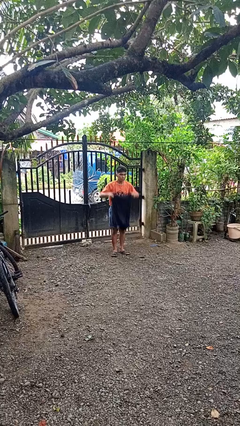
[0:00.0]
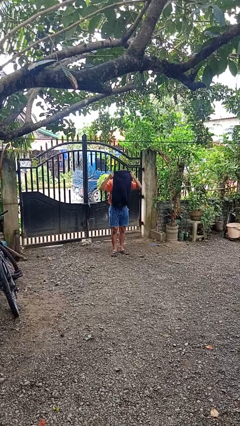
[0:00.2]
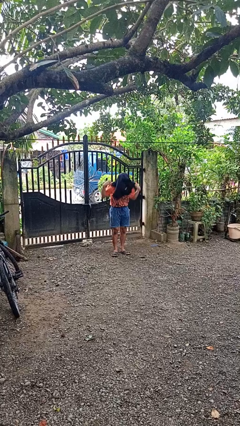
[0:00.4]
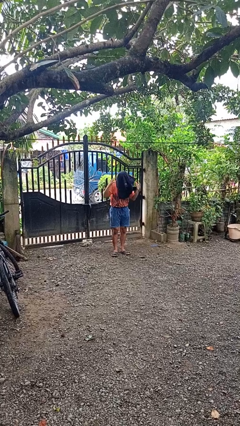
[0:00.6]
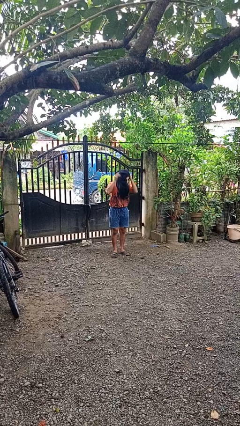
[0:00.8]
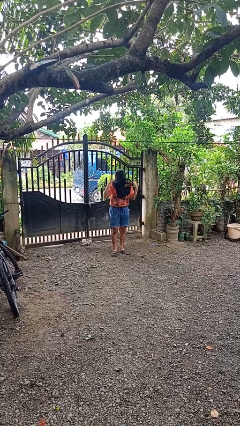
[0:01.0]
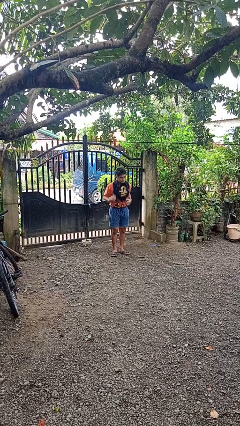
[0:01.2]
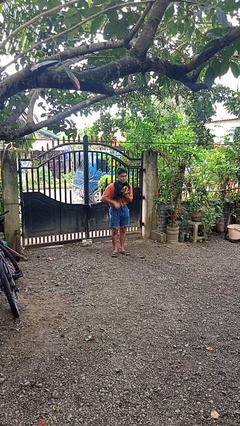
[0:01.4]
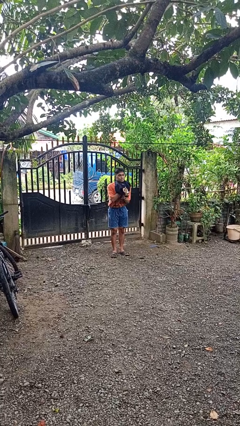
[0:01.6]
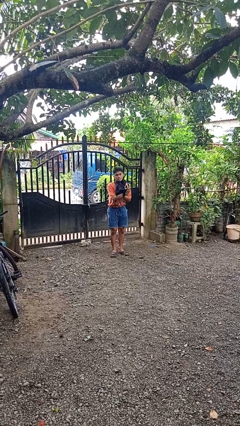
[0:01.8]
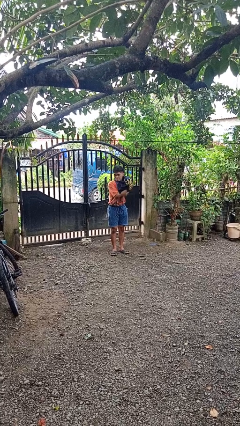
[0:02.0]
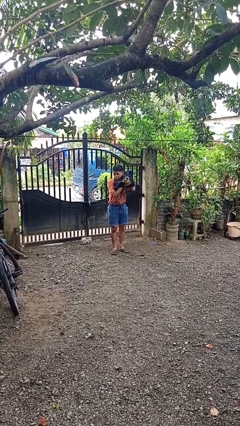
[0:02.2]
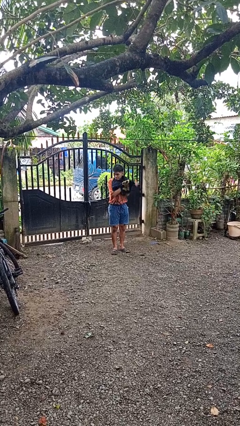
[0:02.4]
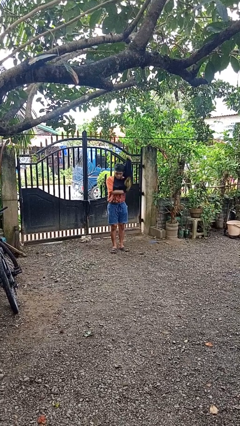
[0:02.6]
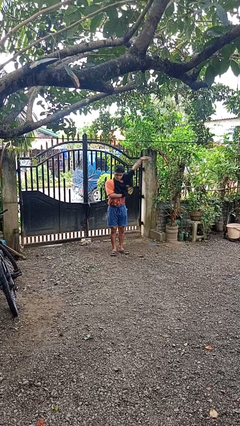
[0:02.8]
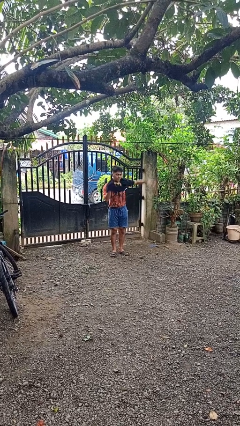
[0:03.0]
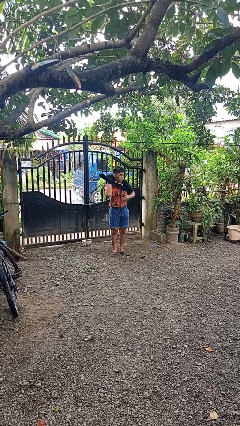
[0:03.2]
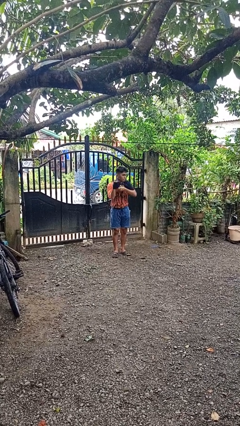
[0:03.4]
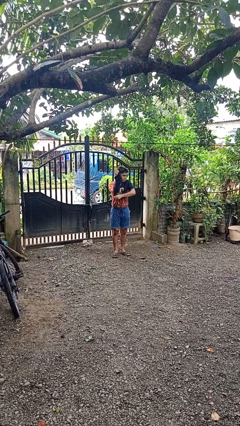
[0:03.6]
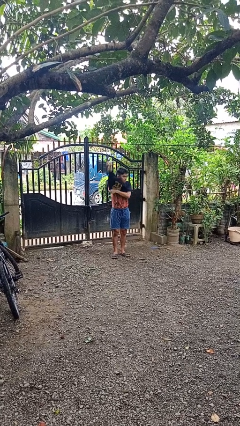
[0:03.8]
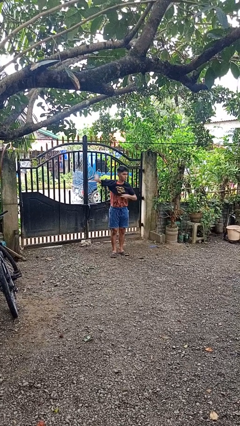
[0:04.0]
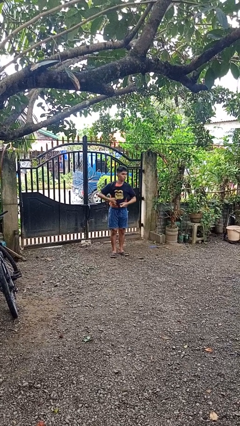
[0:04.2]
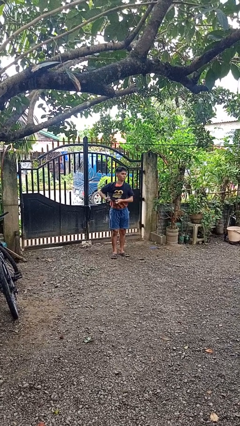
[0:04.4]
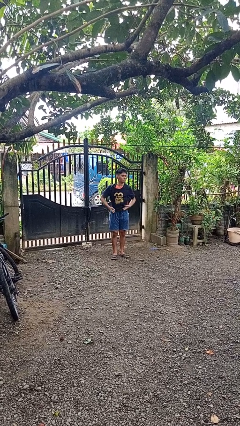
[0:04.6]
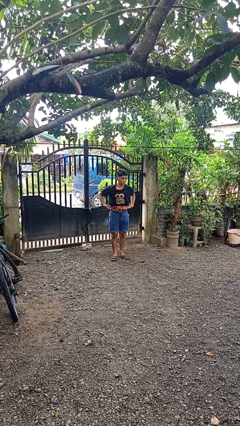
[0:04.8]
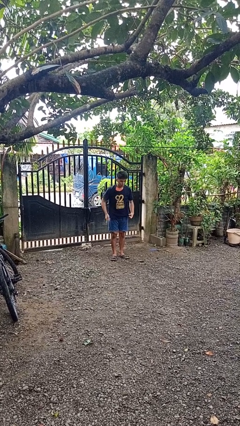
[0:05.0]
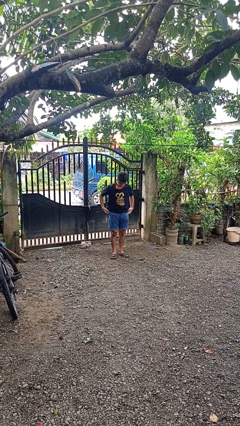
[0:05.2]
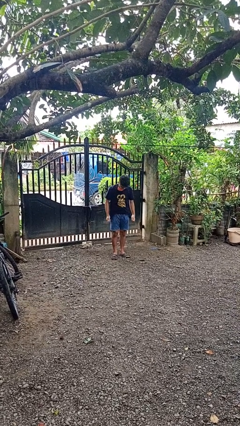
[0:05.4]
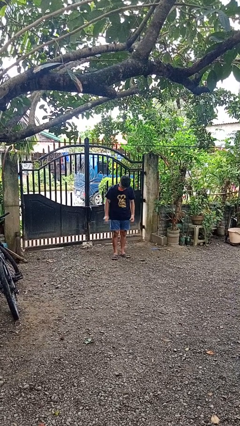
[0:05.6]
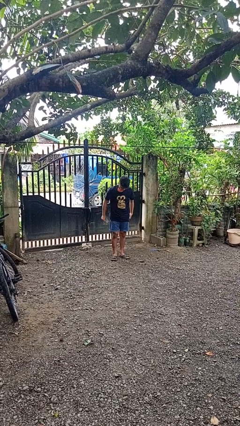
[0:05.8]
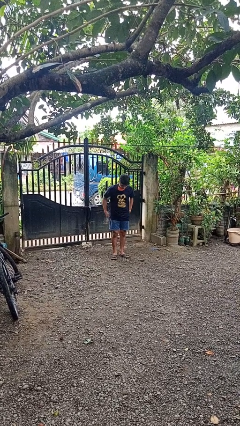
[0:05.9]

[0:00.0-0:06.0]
person puts on shirt

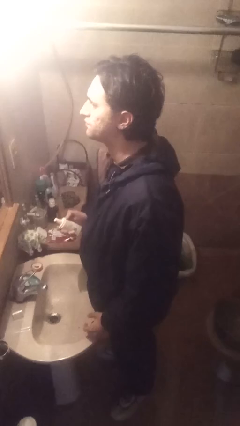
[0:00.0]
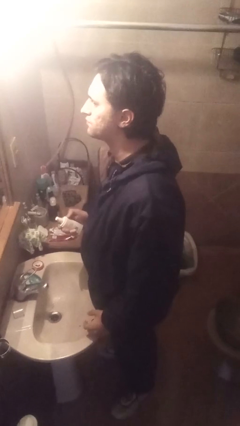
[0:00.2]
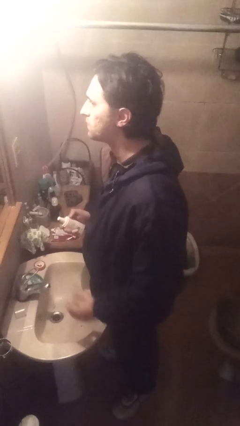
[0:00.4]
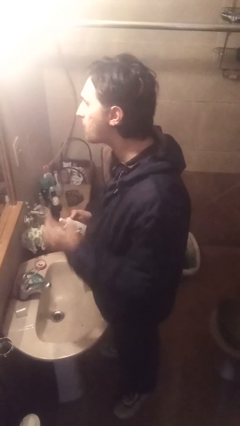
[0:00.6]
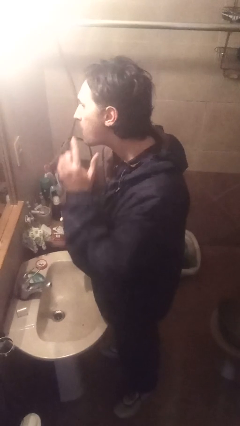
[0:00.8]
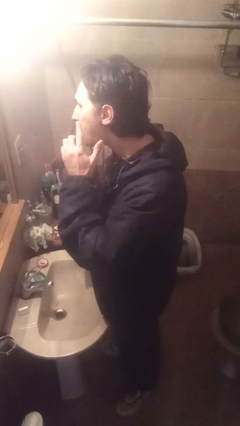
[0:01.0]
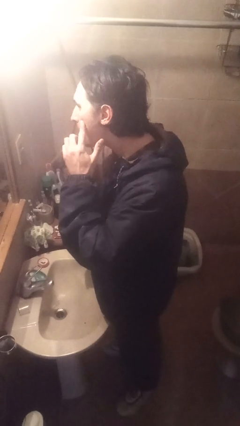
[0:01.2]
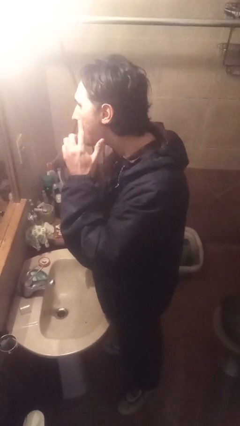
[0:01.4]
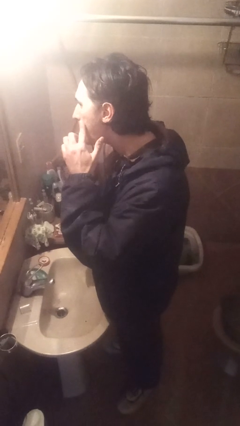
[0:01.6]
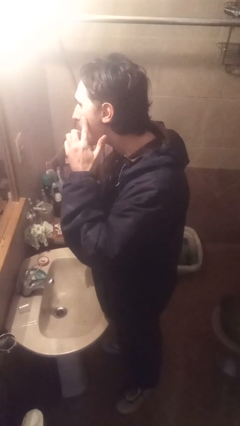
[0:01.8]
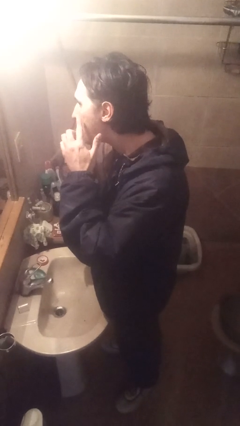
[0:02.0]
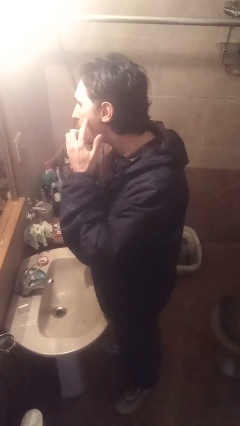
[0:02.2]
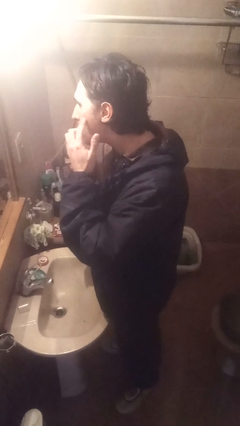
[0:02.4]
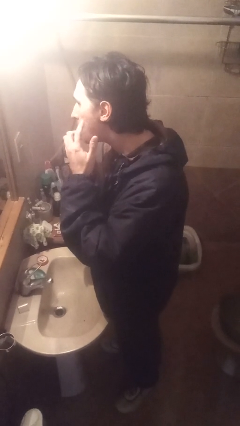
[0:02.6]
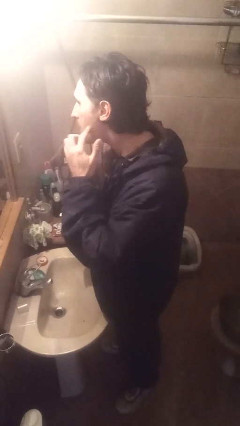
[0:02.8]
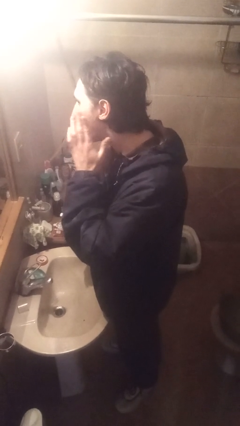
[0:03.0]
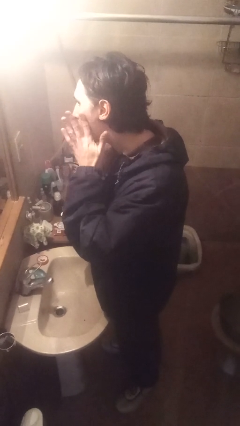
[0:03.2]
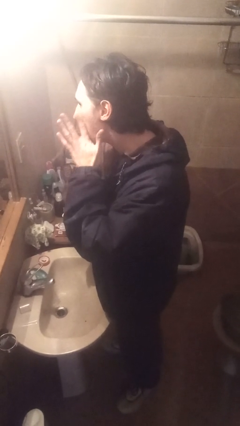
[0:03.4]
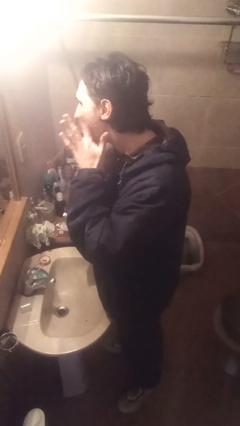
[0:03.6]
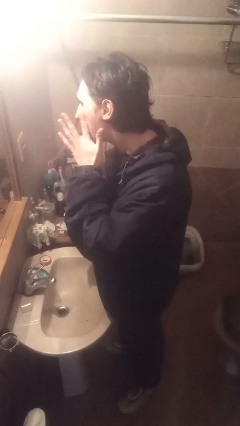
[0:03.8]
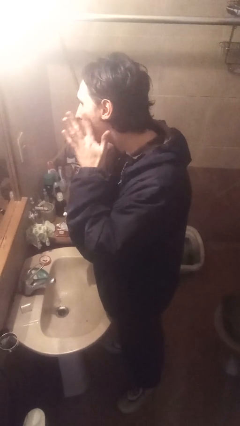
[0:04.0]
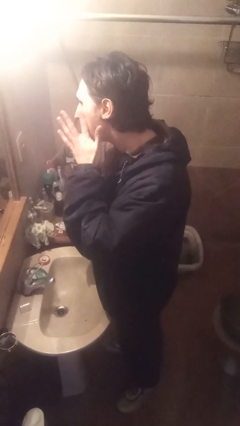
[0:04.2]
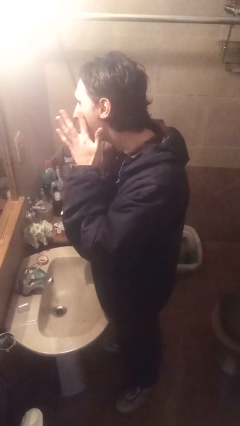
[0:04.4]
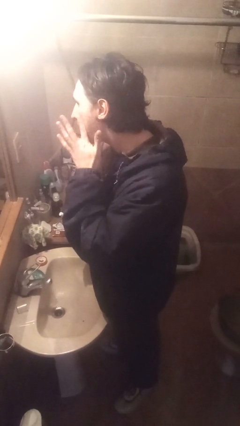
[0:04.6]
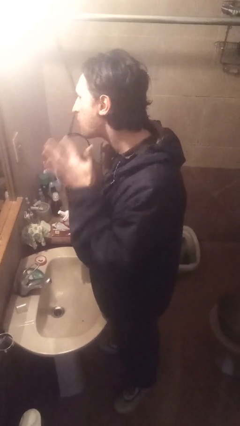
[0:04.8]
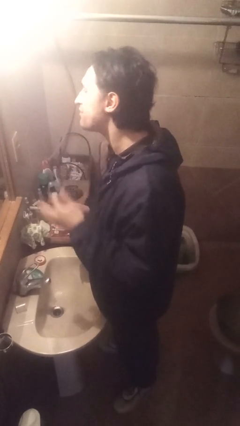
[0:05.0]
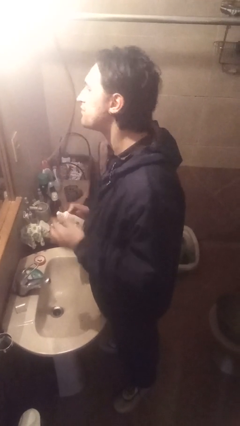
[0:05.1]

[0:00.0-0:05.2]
person applies foundation makeup

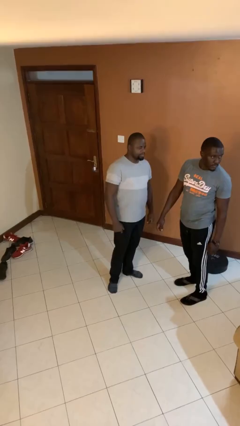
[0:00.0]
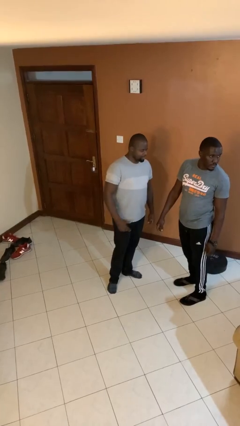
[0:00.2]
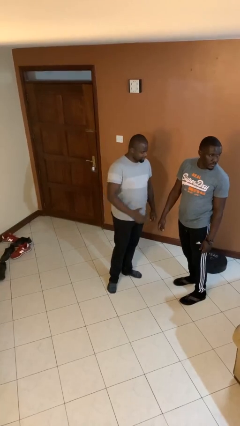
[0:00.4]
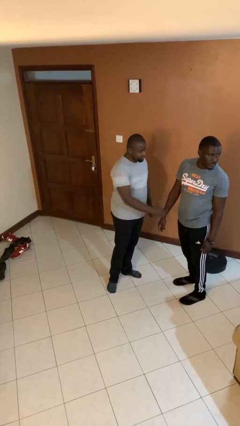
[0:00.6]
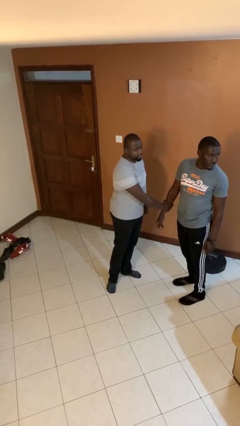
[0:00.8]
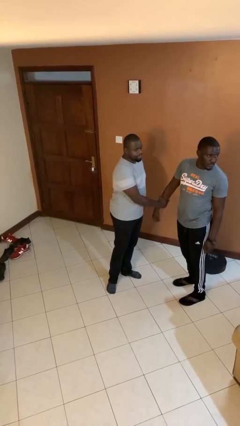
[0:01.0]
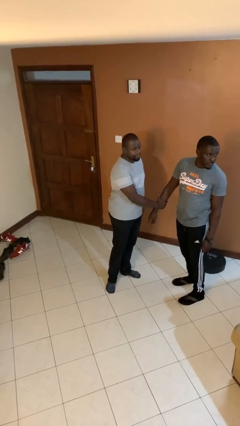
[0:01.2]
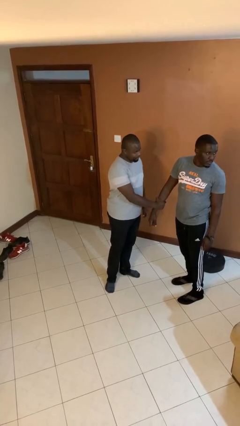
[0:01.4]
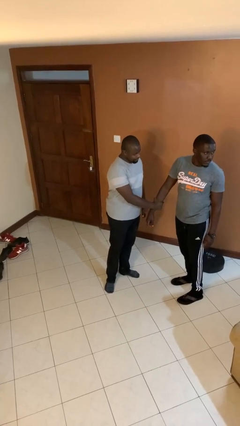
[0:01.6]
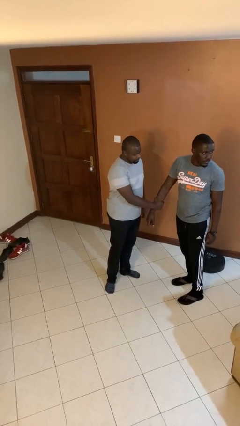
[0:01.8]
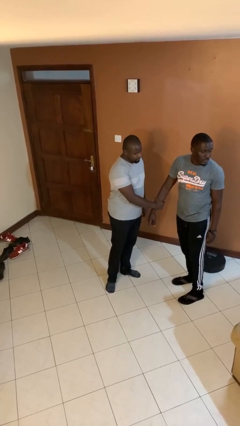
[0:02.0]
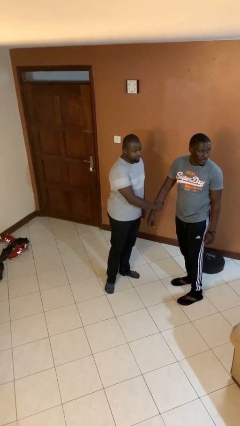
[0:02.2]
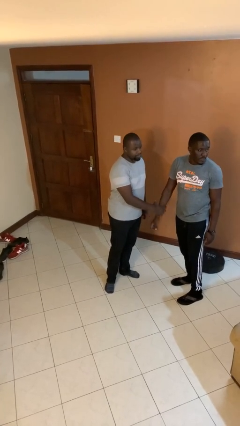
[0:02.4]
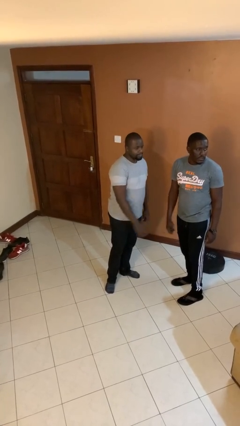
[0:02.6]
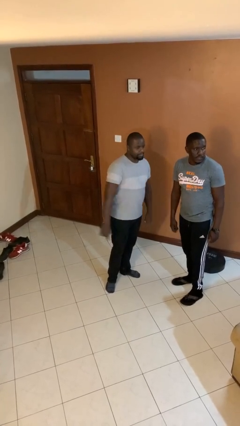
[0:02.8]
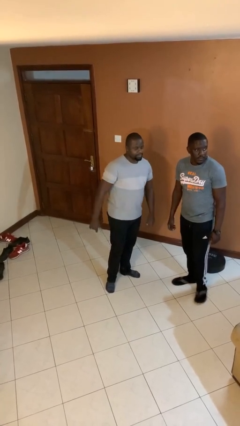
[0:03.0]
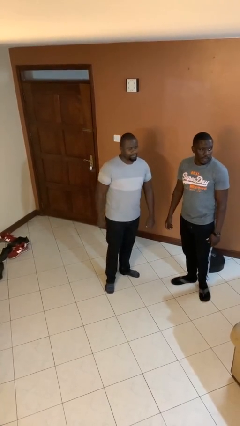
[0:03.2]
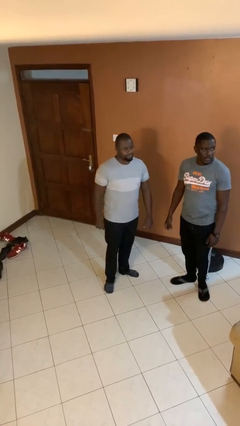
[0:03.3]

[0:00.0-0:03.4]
person grabs person by forearm

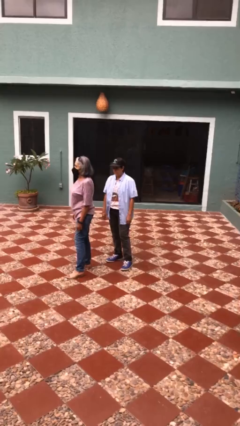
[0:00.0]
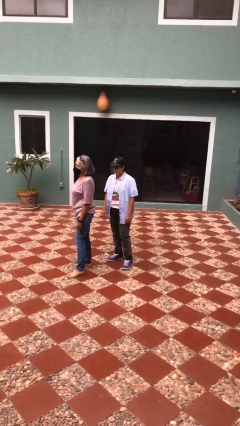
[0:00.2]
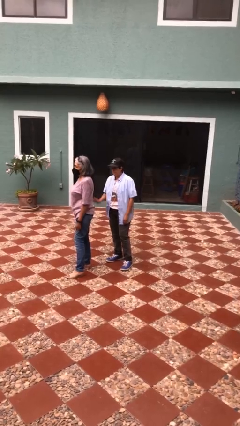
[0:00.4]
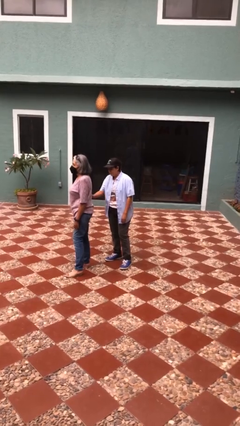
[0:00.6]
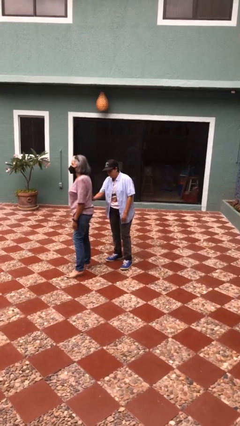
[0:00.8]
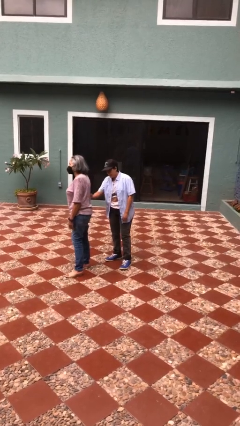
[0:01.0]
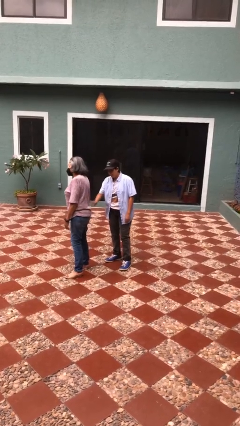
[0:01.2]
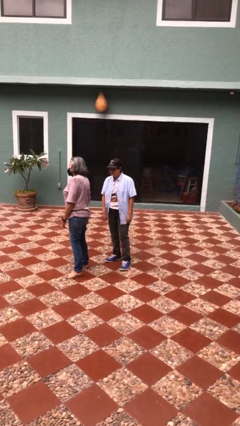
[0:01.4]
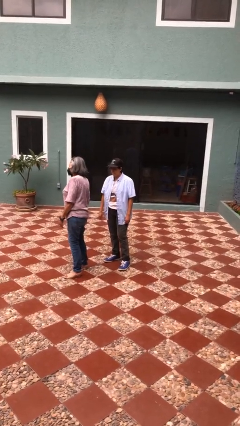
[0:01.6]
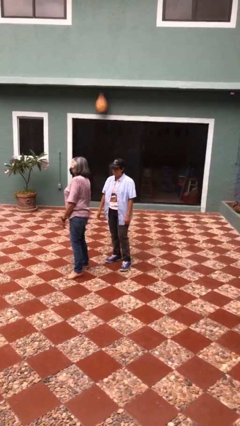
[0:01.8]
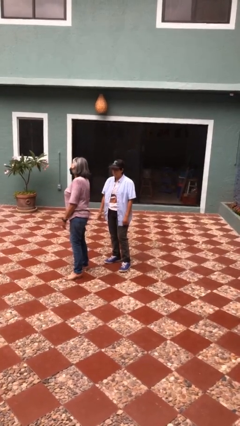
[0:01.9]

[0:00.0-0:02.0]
person tickles person

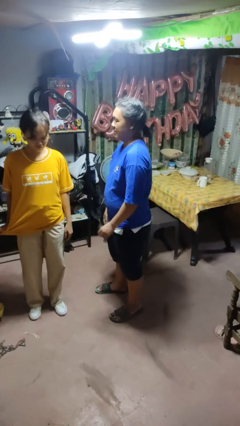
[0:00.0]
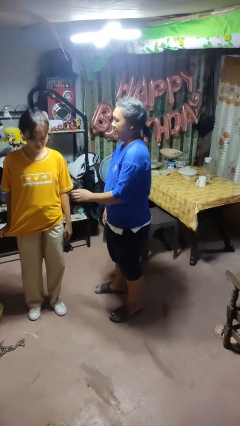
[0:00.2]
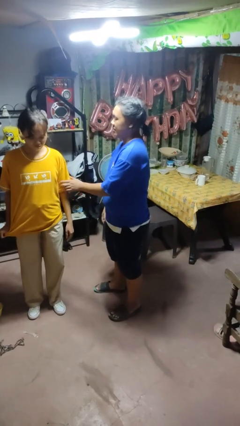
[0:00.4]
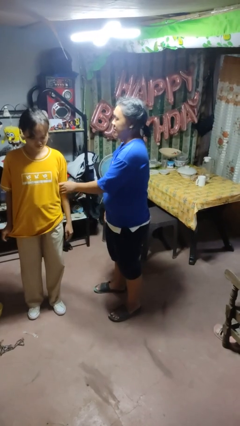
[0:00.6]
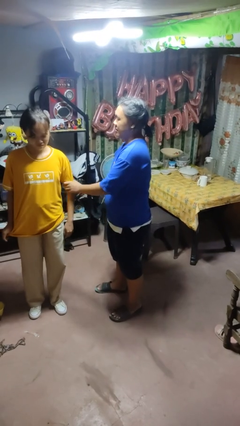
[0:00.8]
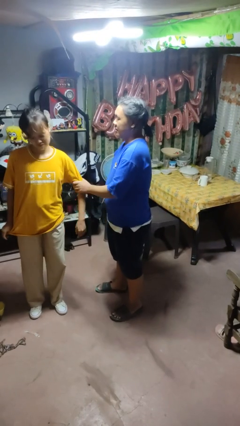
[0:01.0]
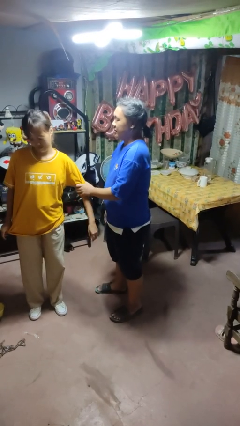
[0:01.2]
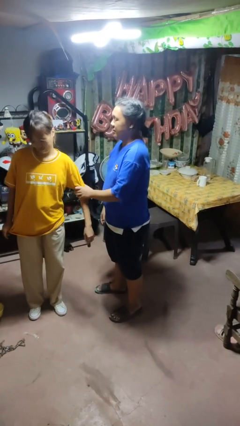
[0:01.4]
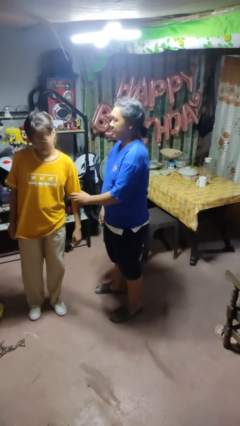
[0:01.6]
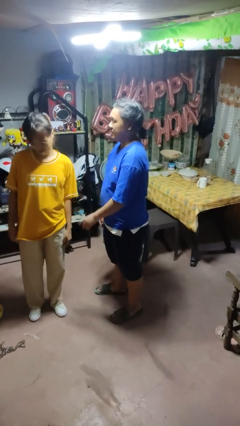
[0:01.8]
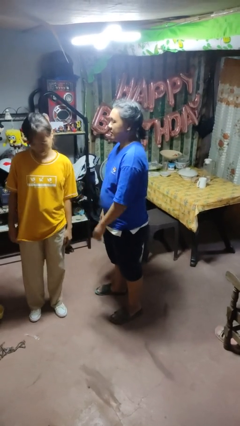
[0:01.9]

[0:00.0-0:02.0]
person grabs person by bicep
